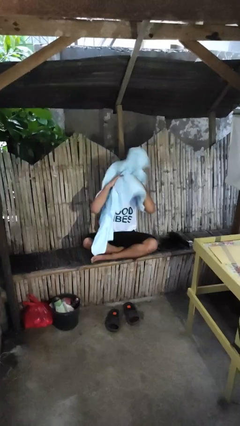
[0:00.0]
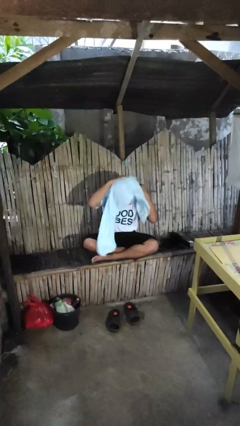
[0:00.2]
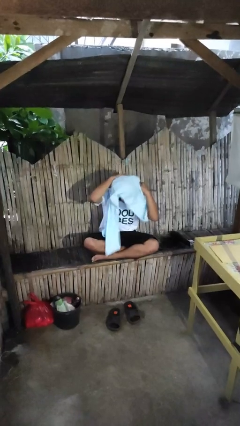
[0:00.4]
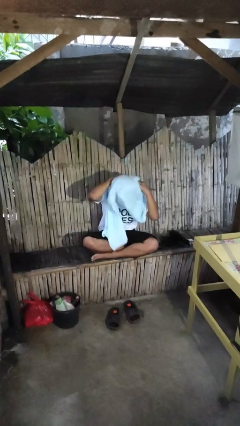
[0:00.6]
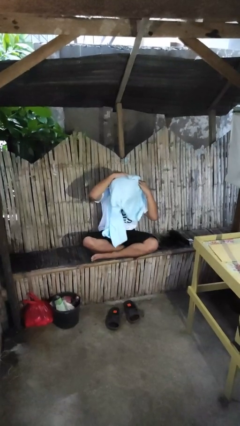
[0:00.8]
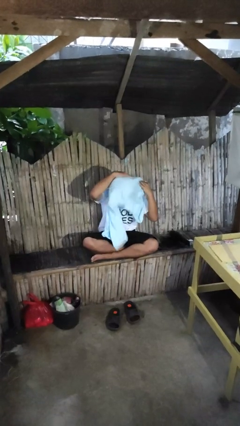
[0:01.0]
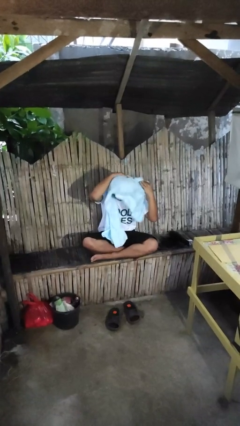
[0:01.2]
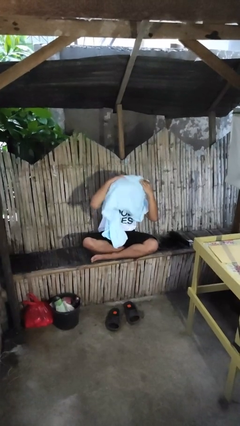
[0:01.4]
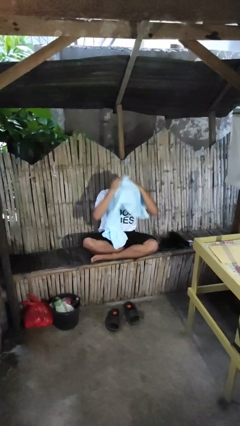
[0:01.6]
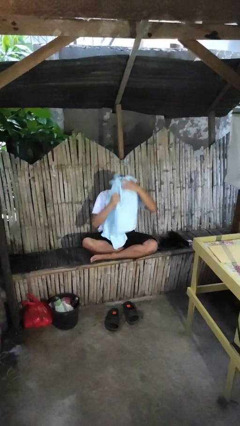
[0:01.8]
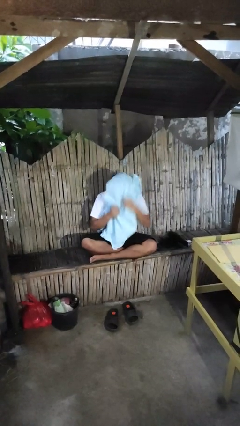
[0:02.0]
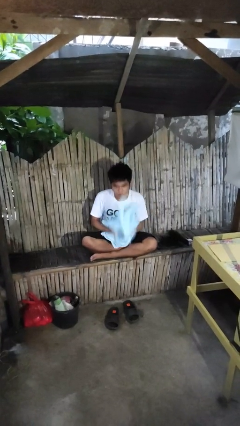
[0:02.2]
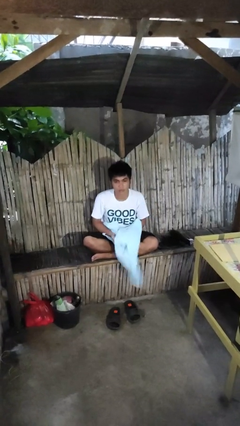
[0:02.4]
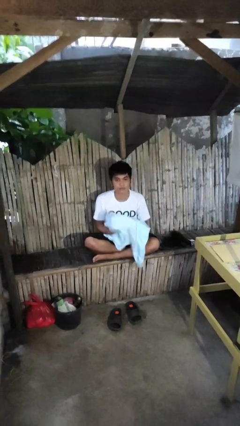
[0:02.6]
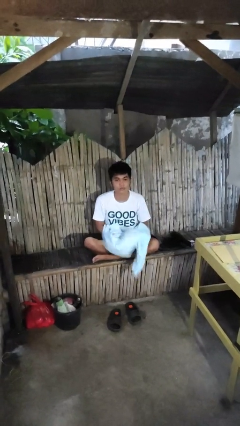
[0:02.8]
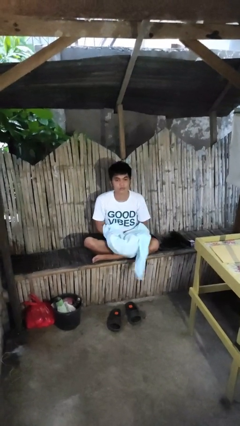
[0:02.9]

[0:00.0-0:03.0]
person dries hair with towel

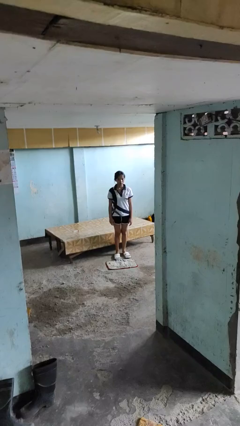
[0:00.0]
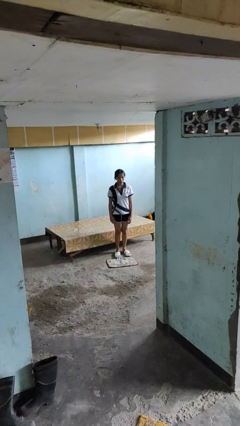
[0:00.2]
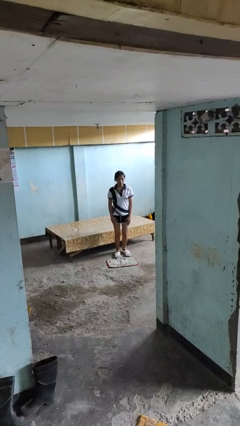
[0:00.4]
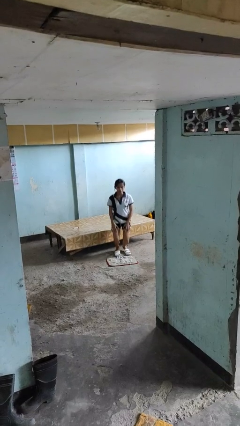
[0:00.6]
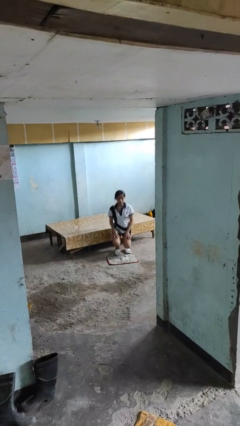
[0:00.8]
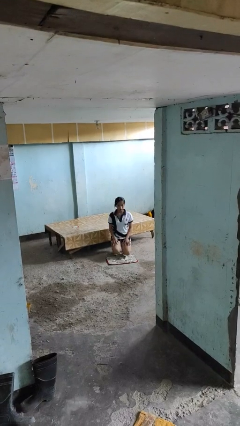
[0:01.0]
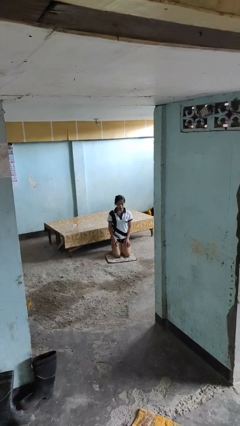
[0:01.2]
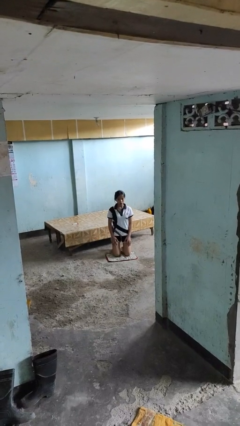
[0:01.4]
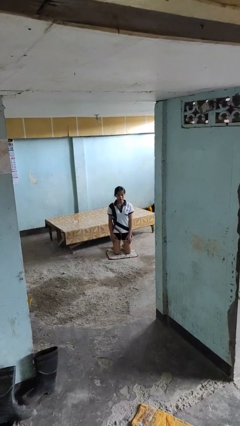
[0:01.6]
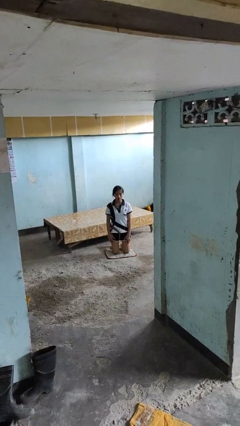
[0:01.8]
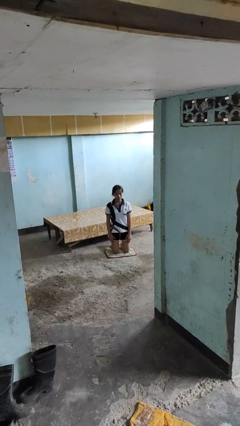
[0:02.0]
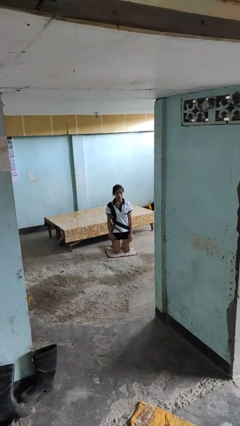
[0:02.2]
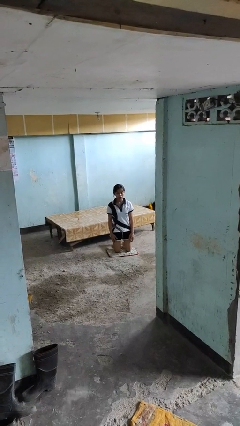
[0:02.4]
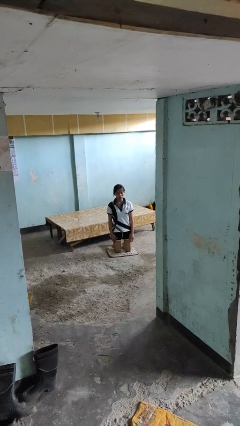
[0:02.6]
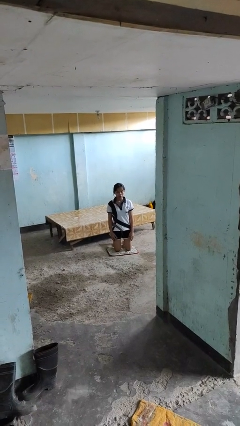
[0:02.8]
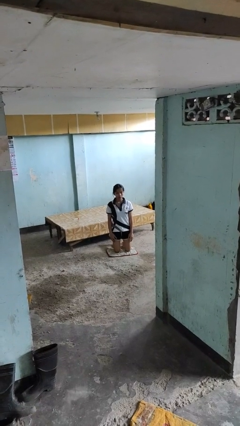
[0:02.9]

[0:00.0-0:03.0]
person kneels

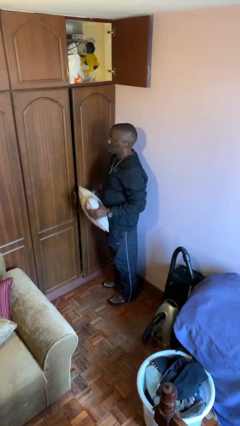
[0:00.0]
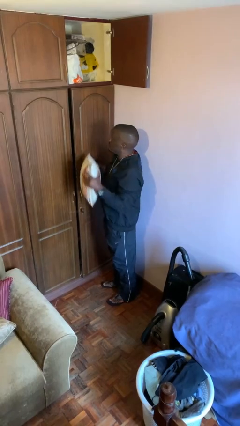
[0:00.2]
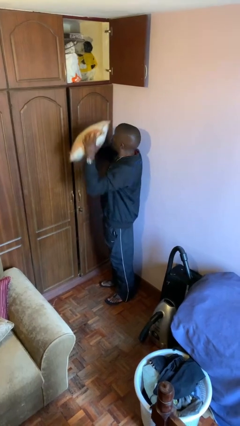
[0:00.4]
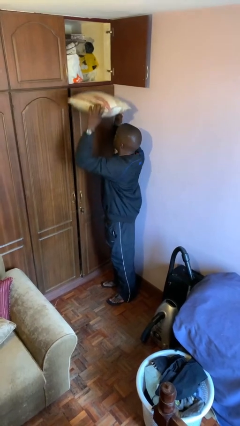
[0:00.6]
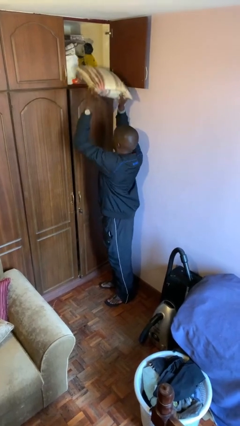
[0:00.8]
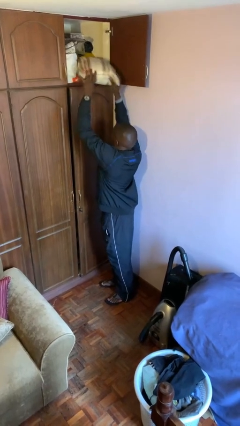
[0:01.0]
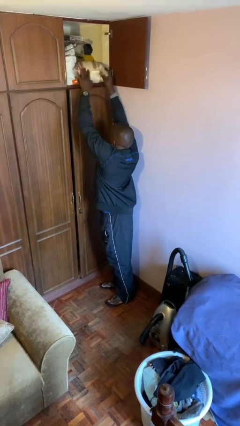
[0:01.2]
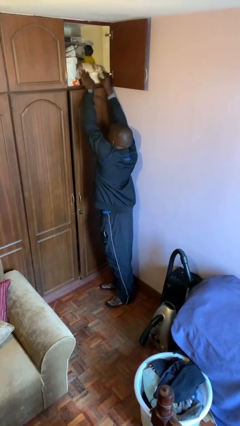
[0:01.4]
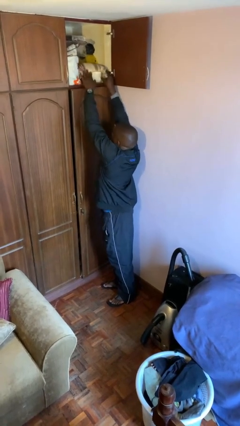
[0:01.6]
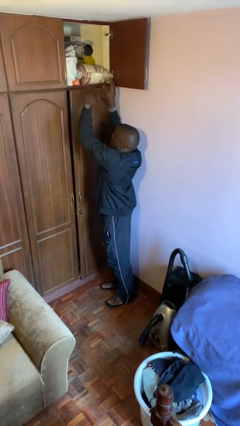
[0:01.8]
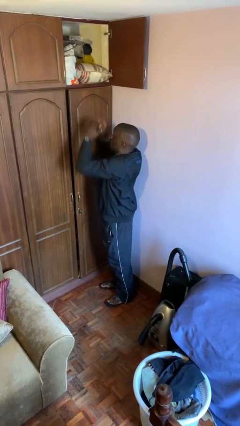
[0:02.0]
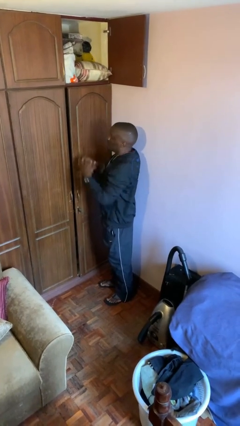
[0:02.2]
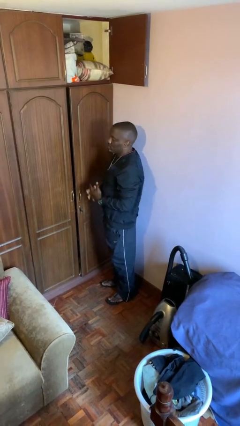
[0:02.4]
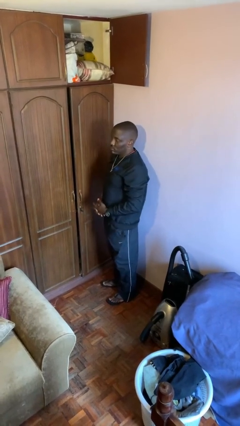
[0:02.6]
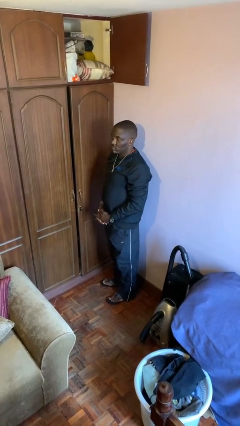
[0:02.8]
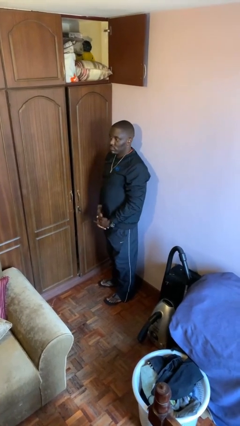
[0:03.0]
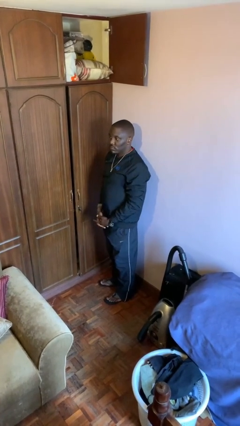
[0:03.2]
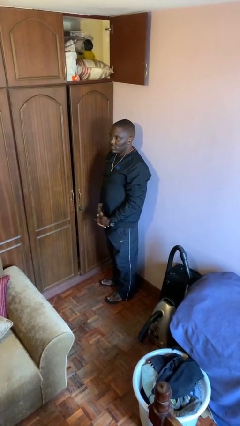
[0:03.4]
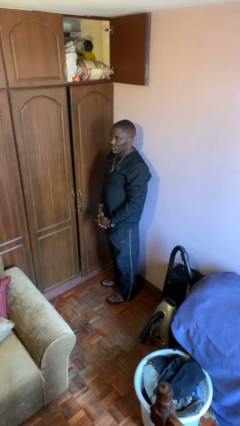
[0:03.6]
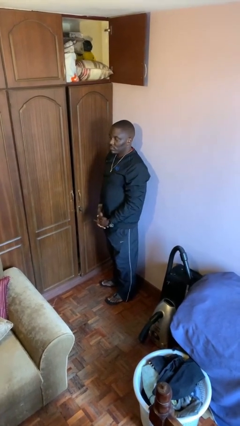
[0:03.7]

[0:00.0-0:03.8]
person puts down object on shelf

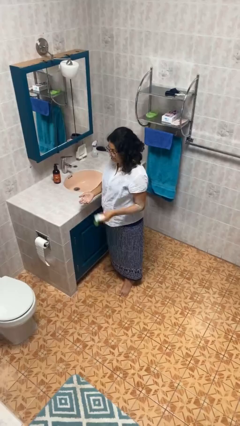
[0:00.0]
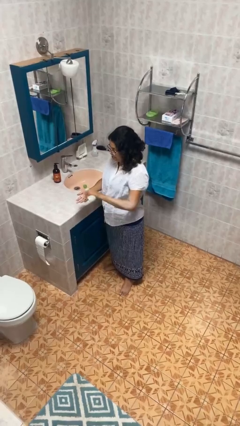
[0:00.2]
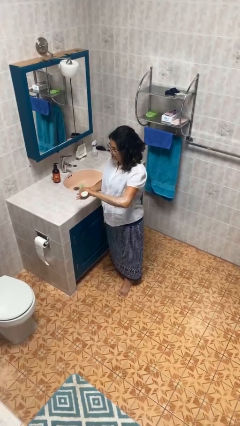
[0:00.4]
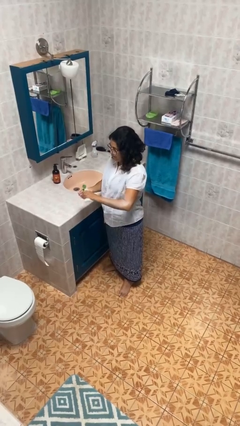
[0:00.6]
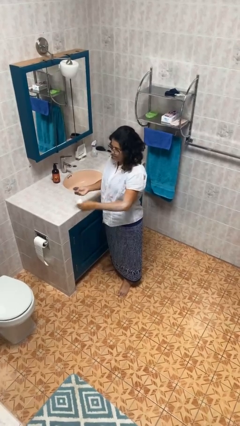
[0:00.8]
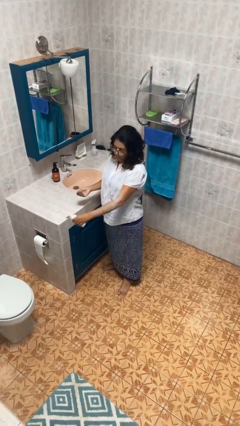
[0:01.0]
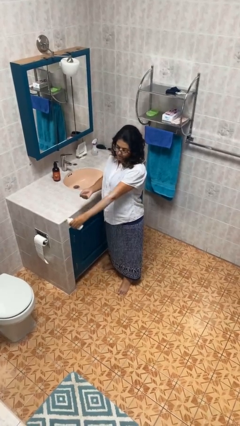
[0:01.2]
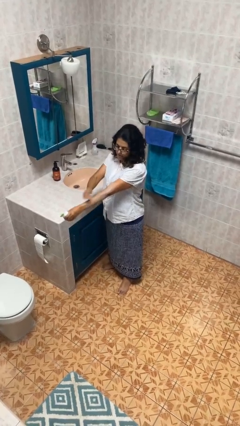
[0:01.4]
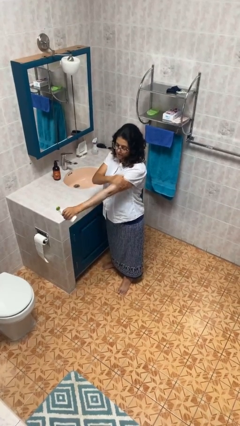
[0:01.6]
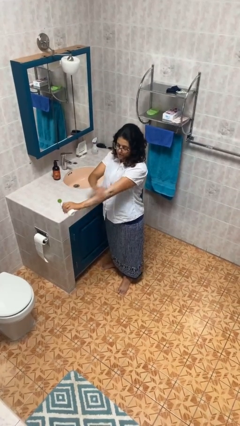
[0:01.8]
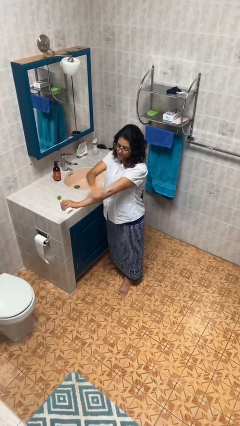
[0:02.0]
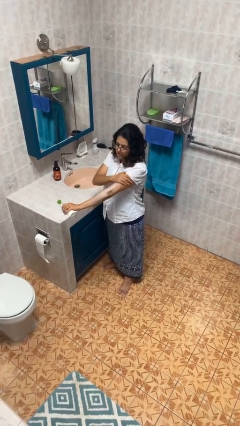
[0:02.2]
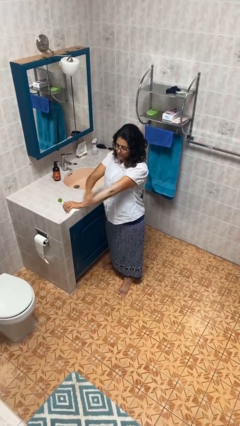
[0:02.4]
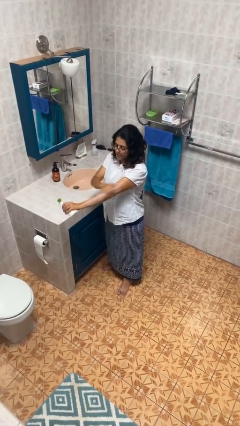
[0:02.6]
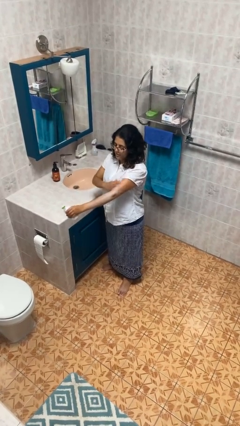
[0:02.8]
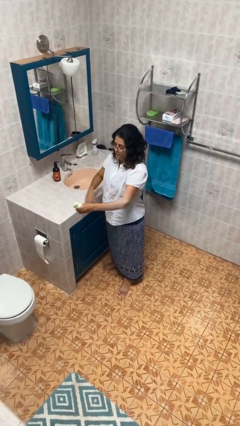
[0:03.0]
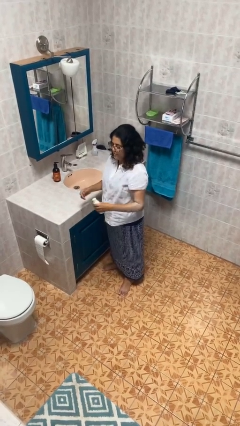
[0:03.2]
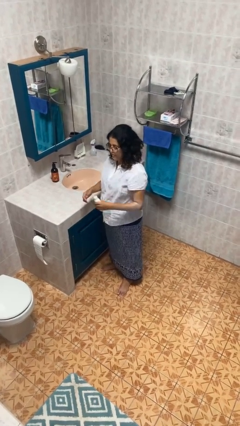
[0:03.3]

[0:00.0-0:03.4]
person applies sunscreen

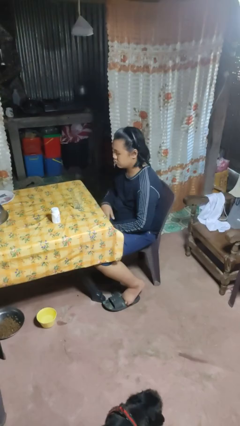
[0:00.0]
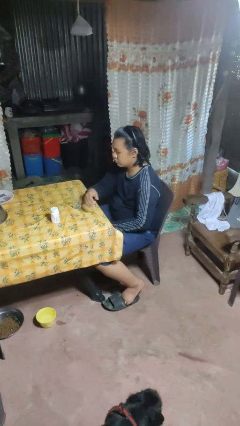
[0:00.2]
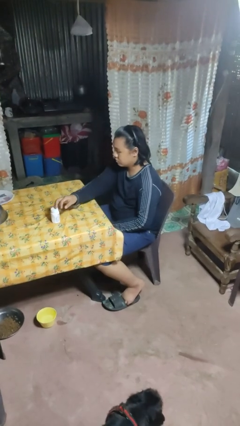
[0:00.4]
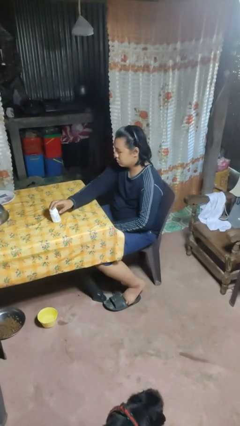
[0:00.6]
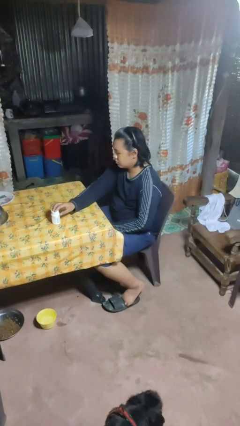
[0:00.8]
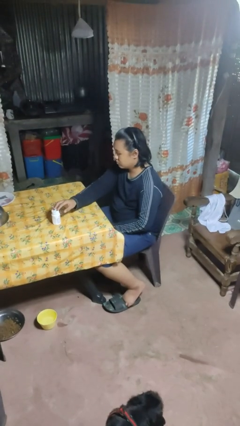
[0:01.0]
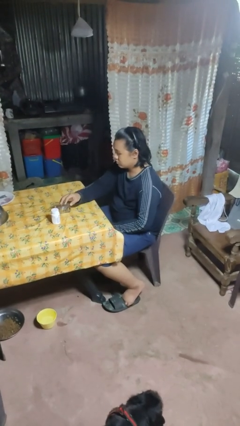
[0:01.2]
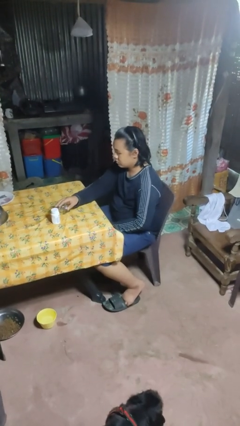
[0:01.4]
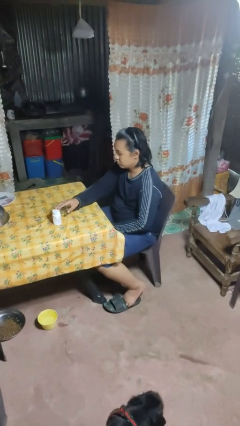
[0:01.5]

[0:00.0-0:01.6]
person knocks over glass

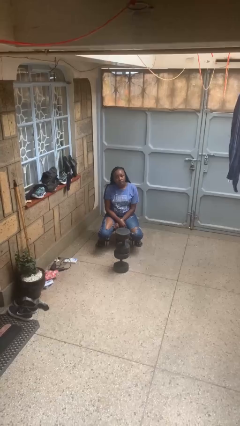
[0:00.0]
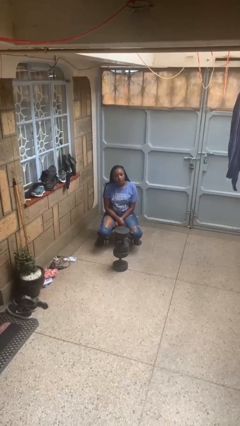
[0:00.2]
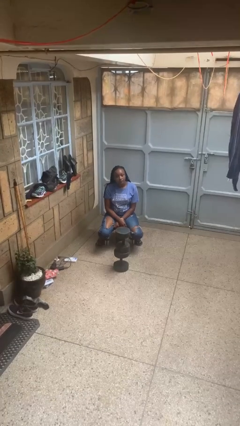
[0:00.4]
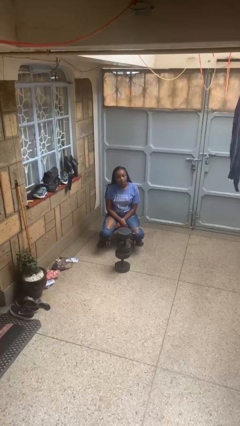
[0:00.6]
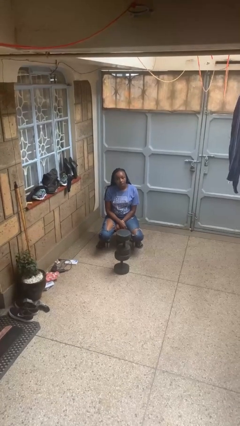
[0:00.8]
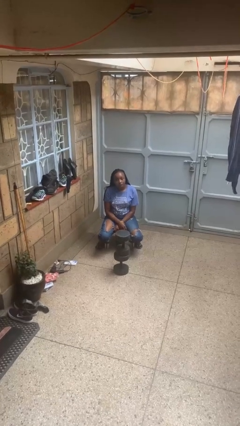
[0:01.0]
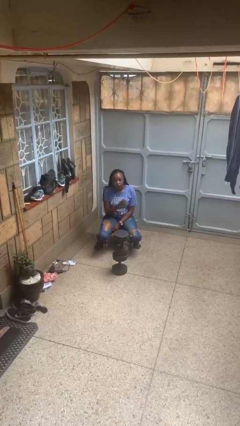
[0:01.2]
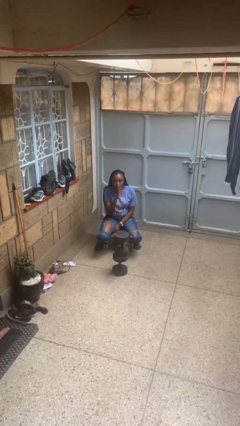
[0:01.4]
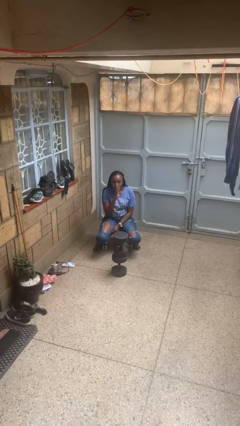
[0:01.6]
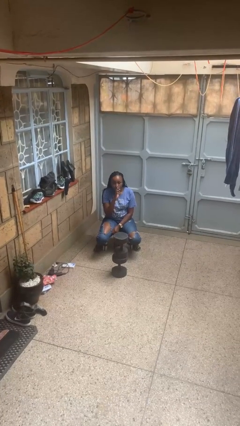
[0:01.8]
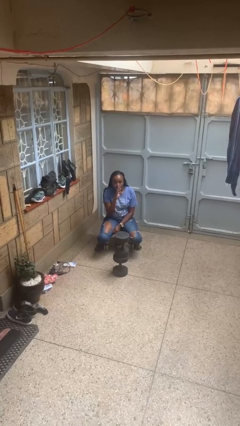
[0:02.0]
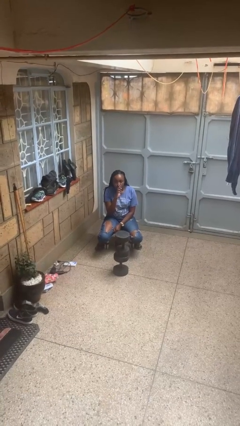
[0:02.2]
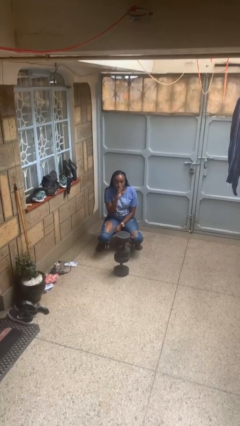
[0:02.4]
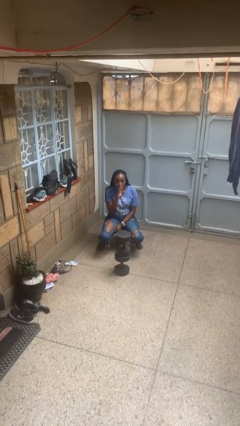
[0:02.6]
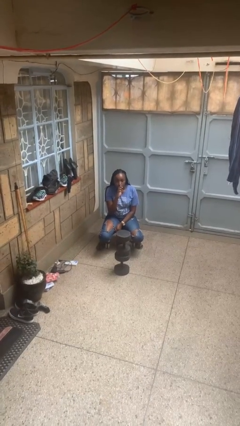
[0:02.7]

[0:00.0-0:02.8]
person gestures be quiet
